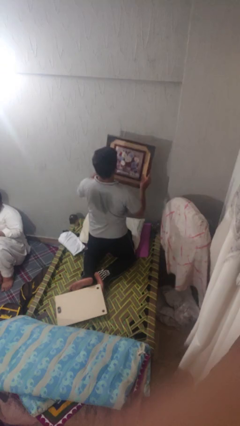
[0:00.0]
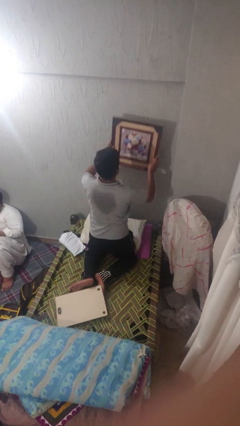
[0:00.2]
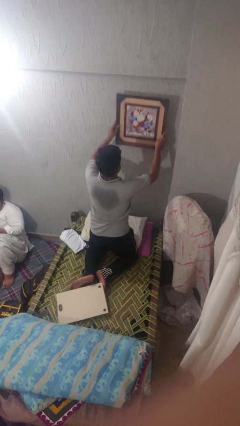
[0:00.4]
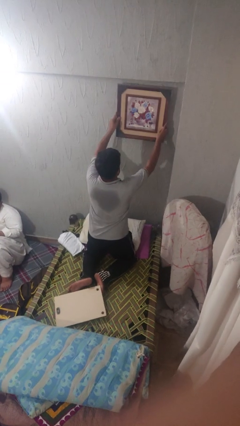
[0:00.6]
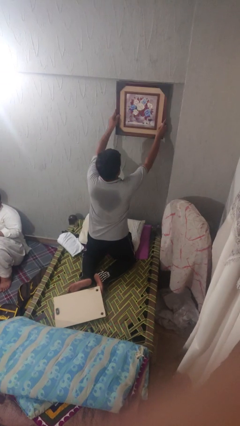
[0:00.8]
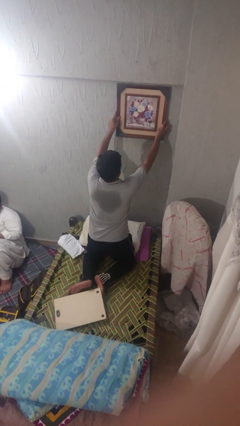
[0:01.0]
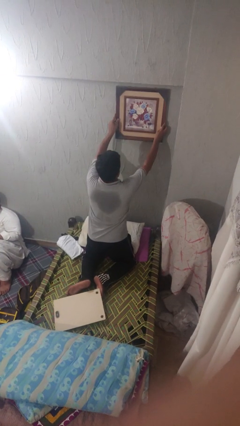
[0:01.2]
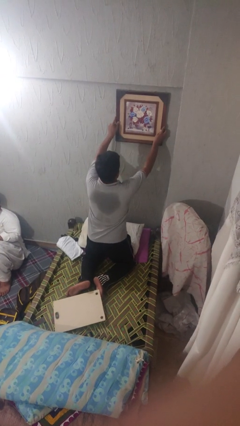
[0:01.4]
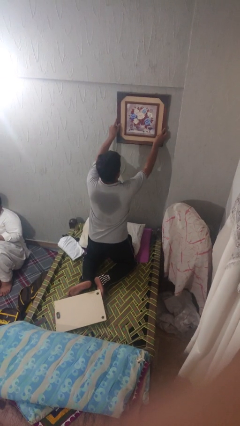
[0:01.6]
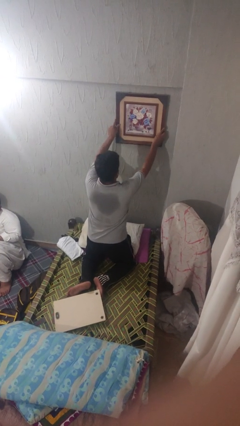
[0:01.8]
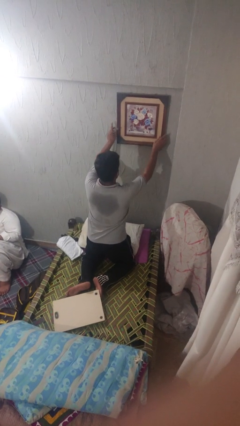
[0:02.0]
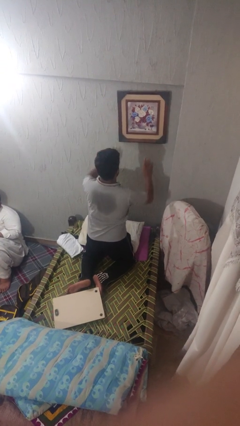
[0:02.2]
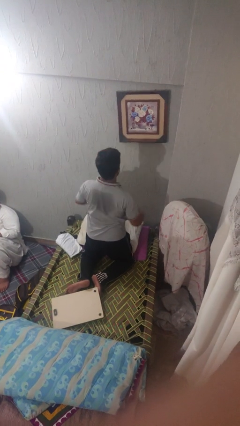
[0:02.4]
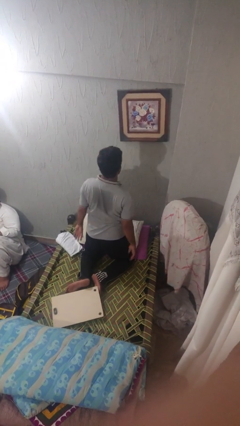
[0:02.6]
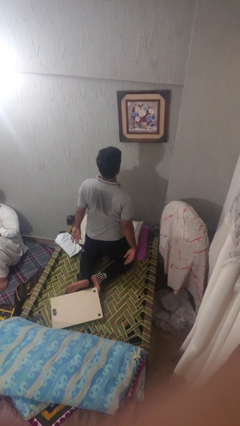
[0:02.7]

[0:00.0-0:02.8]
person puts up picture frame

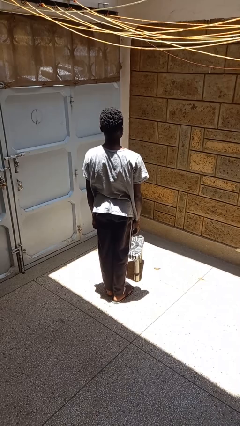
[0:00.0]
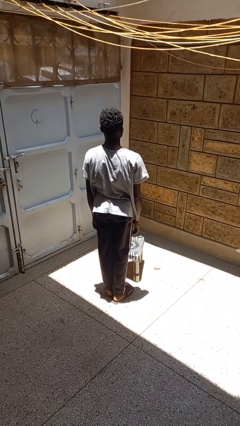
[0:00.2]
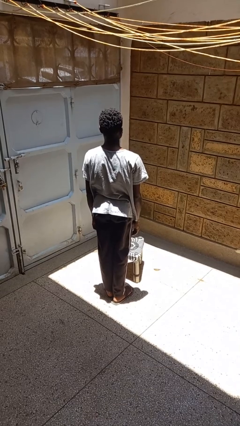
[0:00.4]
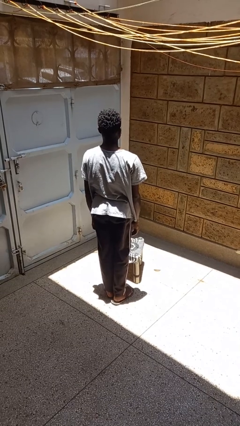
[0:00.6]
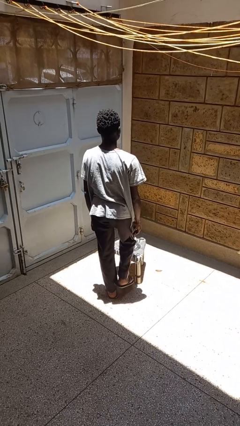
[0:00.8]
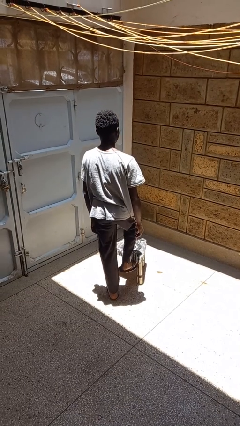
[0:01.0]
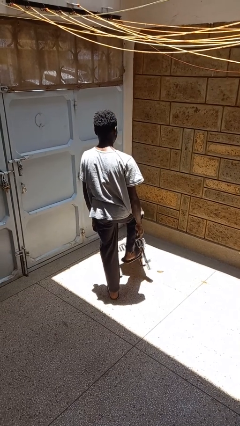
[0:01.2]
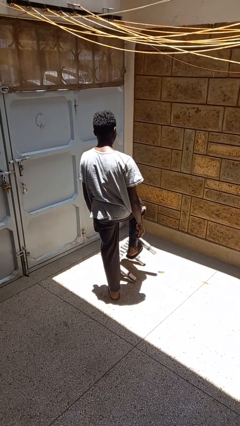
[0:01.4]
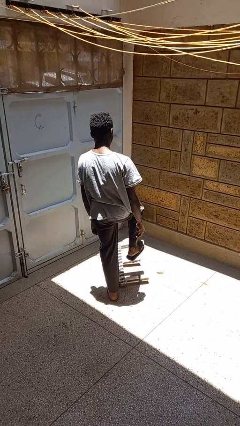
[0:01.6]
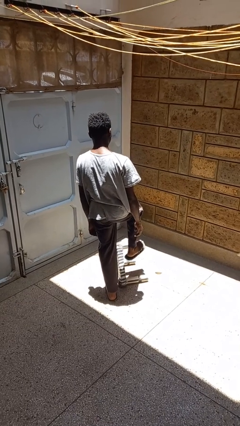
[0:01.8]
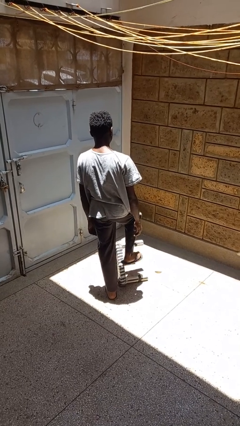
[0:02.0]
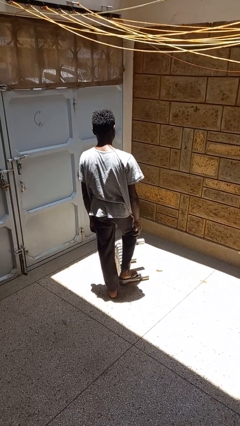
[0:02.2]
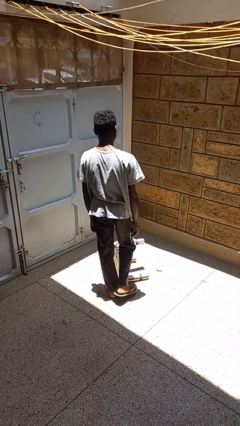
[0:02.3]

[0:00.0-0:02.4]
person knocks over furniture

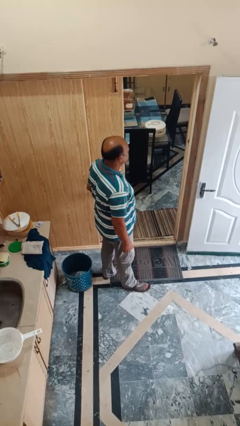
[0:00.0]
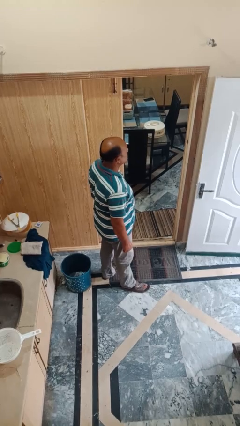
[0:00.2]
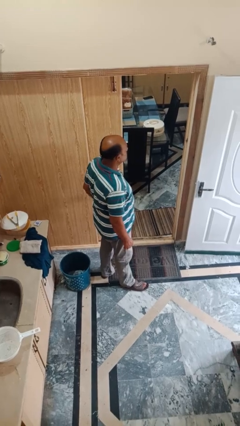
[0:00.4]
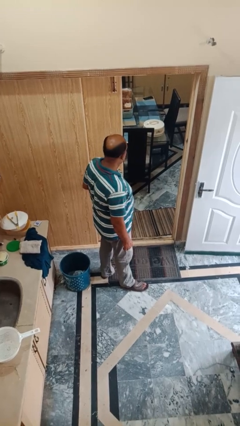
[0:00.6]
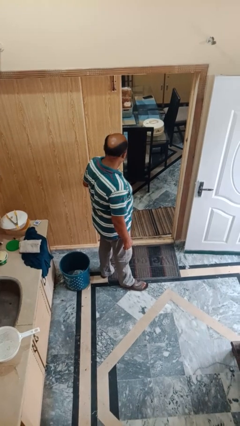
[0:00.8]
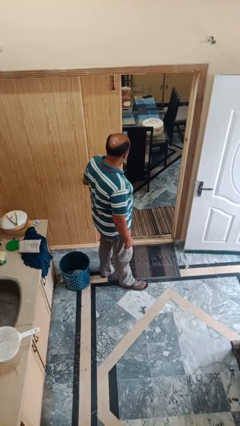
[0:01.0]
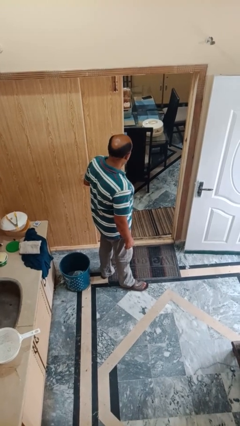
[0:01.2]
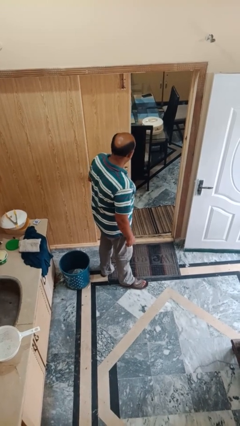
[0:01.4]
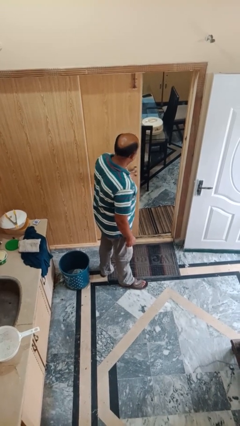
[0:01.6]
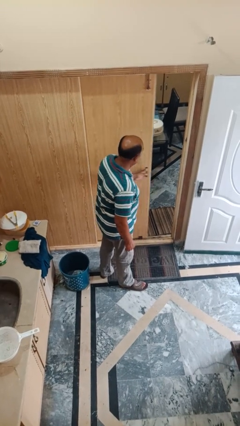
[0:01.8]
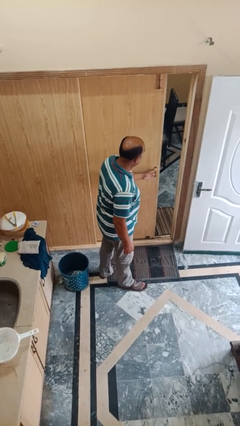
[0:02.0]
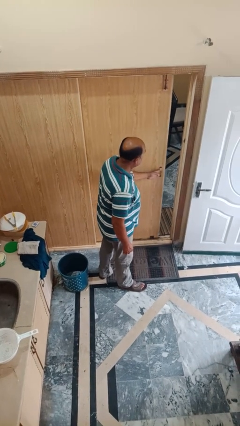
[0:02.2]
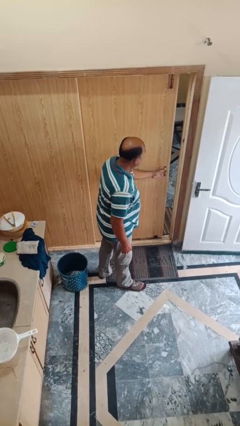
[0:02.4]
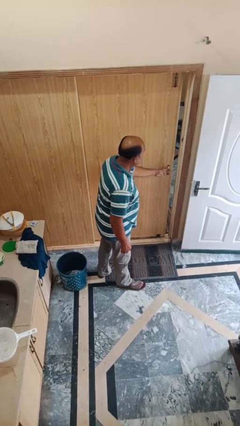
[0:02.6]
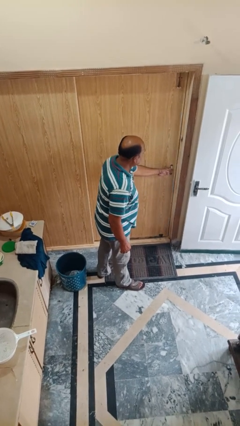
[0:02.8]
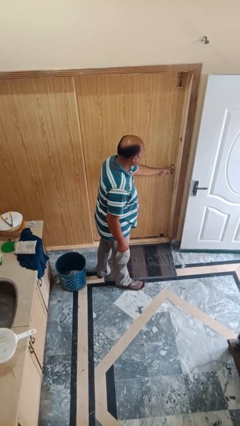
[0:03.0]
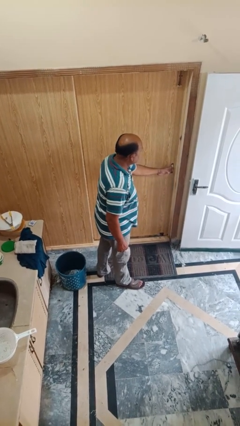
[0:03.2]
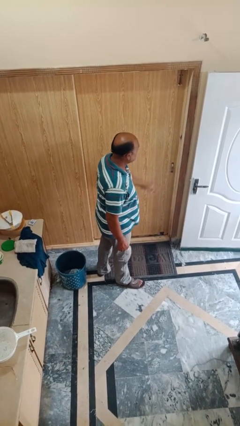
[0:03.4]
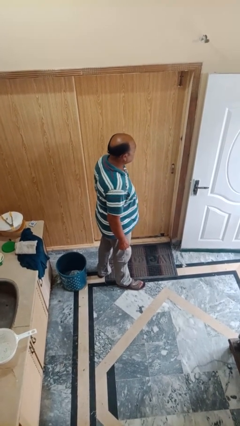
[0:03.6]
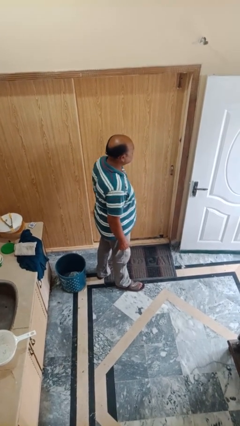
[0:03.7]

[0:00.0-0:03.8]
person closes sliding door

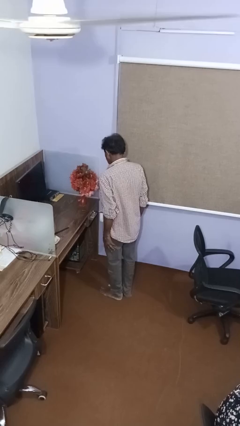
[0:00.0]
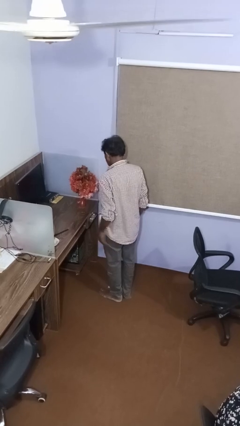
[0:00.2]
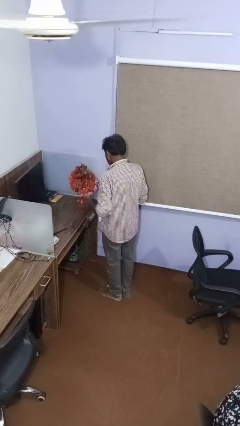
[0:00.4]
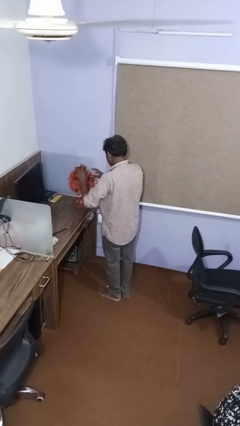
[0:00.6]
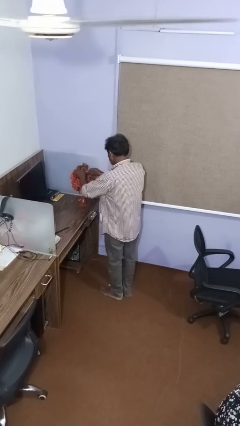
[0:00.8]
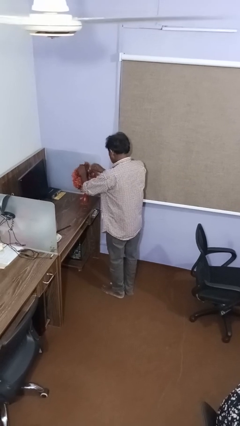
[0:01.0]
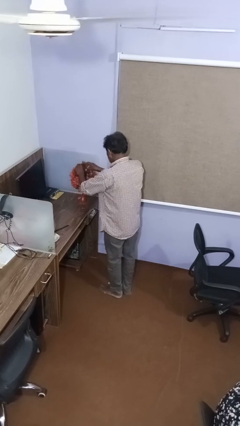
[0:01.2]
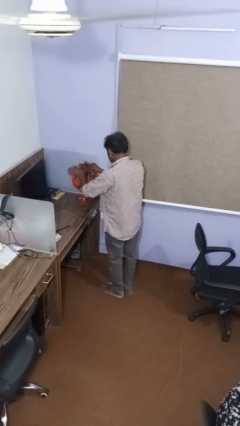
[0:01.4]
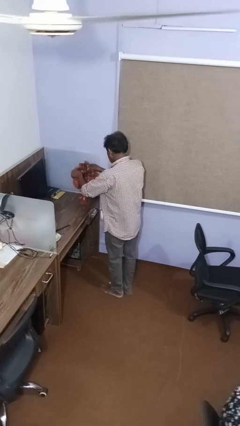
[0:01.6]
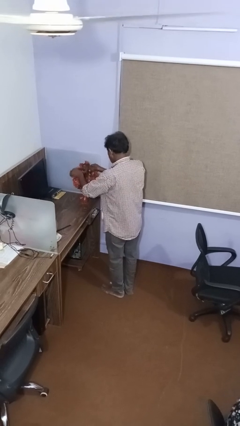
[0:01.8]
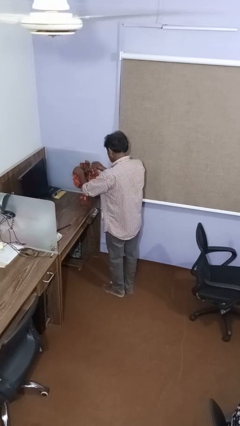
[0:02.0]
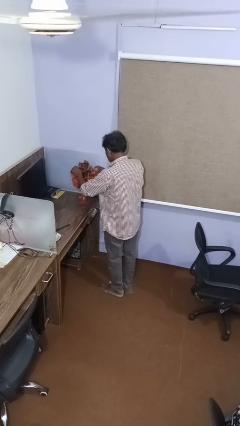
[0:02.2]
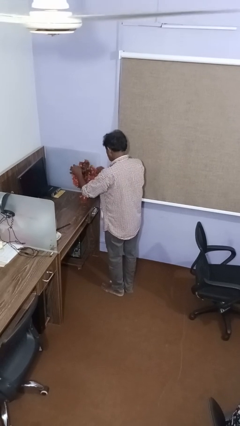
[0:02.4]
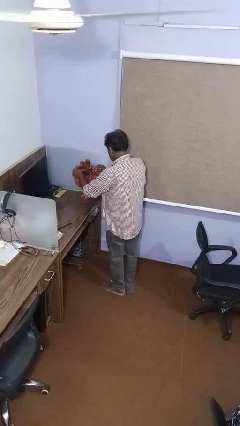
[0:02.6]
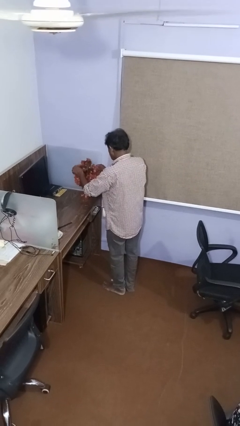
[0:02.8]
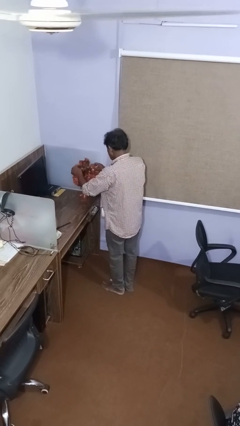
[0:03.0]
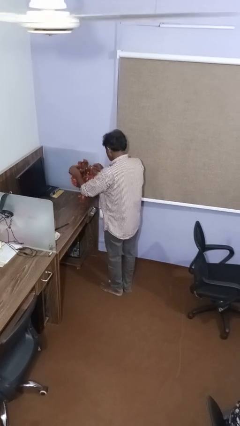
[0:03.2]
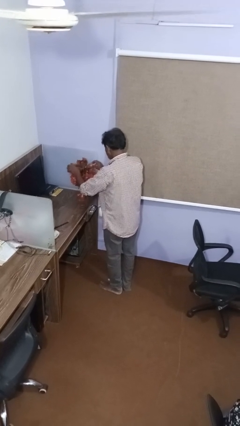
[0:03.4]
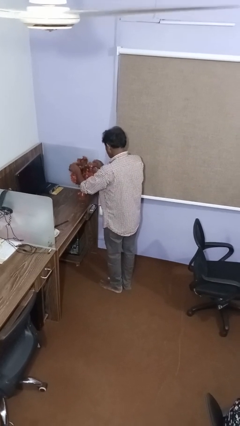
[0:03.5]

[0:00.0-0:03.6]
person arranges flowers in vase

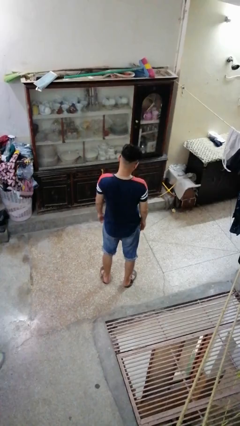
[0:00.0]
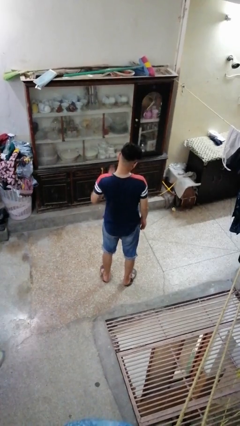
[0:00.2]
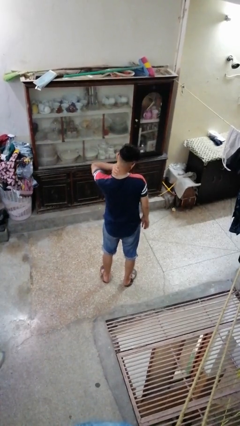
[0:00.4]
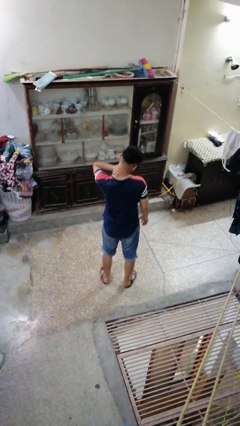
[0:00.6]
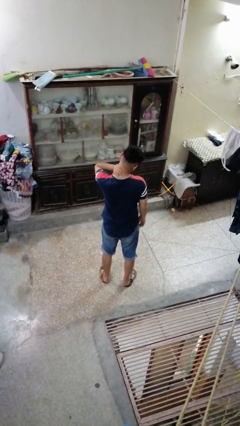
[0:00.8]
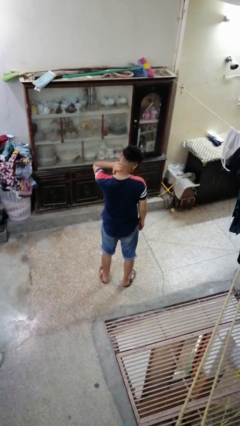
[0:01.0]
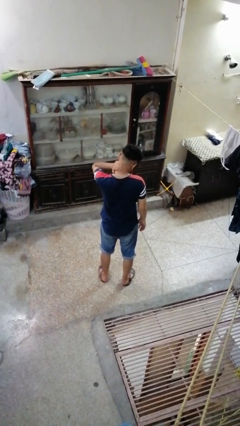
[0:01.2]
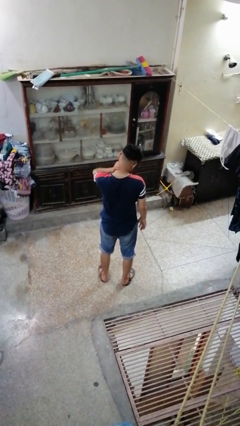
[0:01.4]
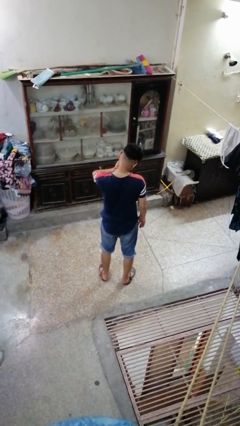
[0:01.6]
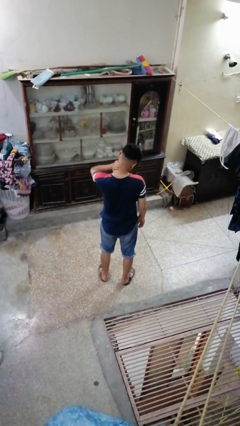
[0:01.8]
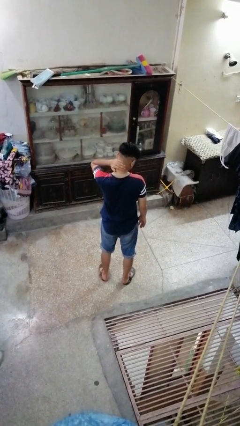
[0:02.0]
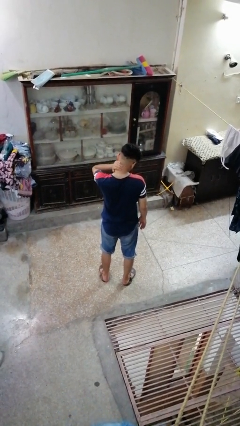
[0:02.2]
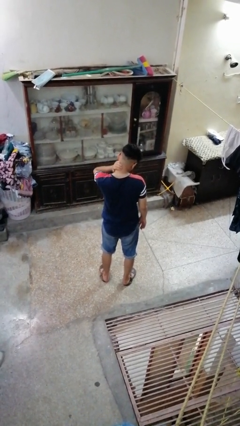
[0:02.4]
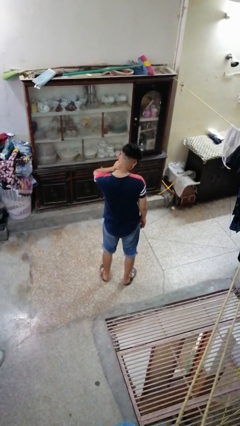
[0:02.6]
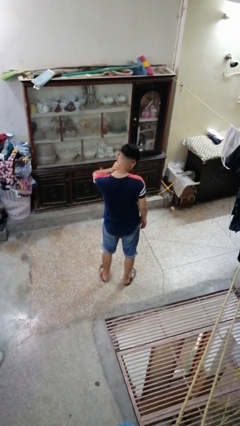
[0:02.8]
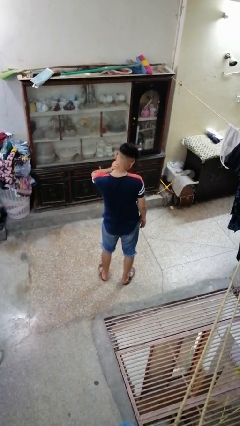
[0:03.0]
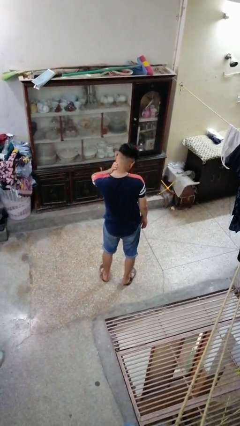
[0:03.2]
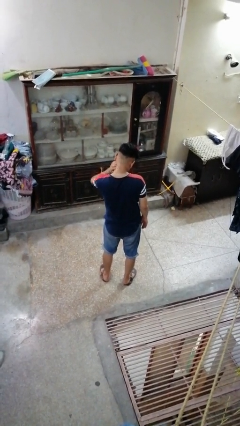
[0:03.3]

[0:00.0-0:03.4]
person swats bug

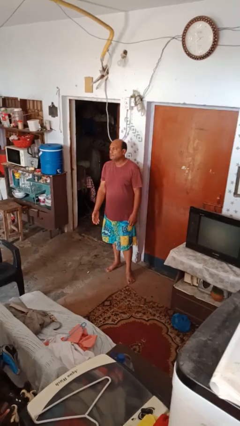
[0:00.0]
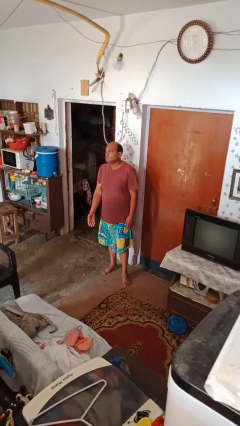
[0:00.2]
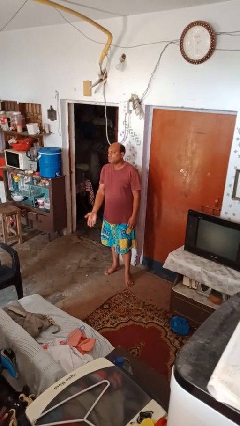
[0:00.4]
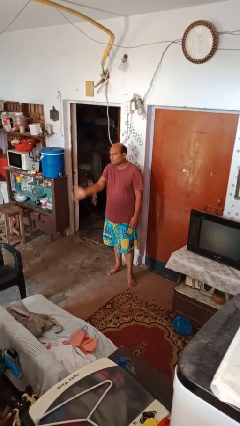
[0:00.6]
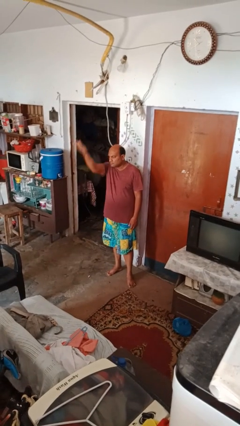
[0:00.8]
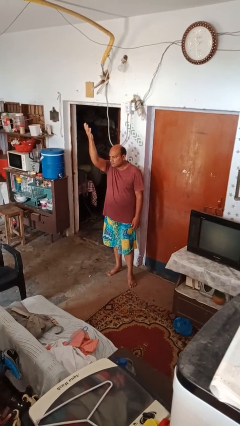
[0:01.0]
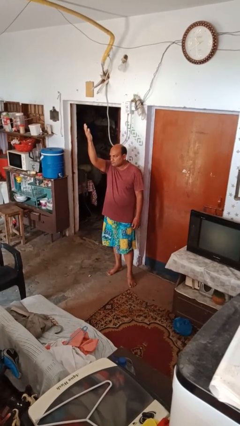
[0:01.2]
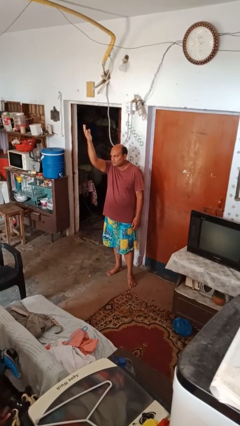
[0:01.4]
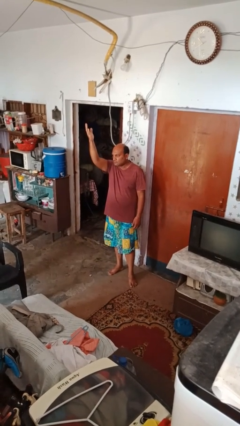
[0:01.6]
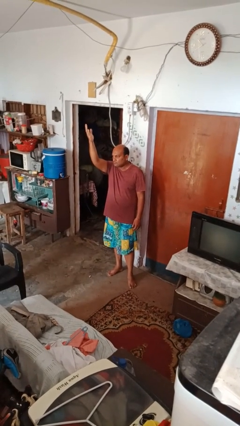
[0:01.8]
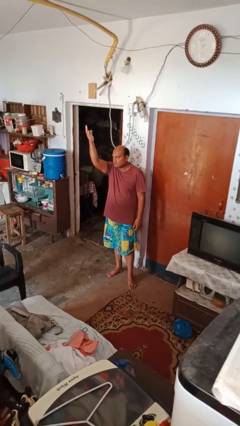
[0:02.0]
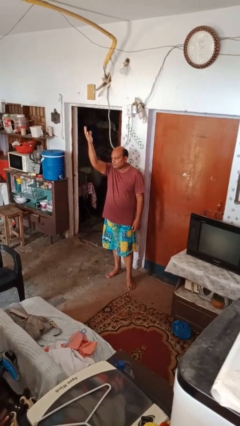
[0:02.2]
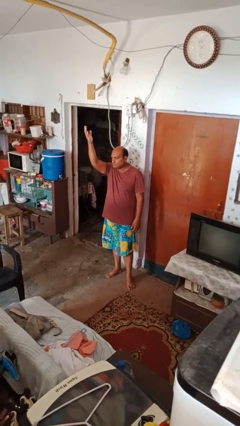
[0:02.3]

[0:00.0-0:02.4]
person gestures raise hand
